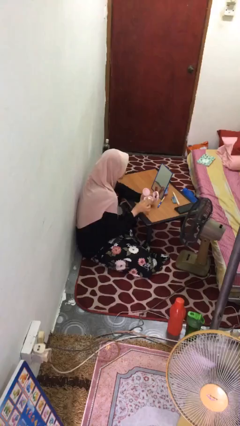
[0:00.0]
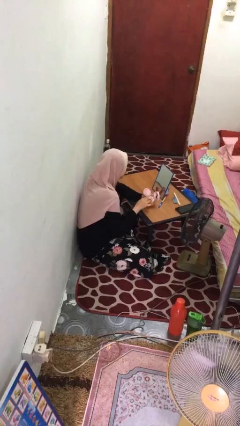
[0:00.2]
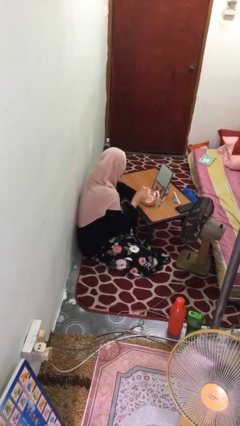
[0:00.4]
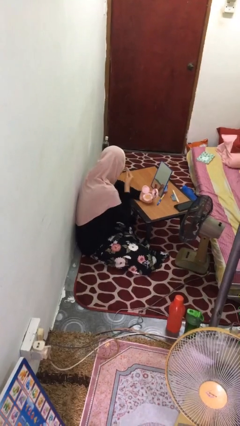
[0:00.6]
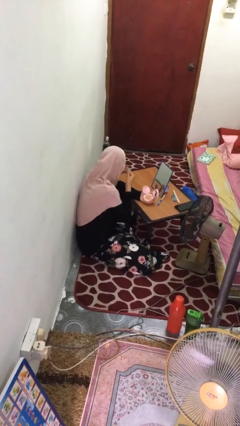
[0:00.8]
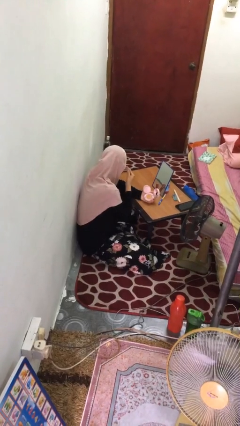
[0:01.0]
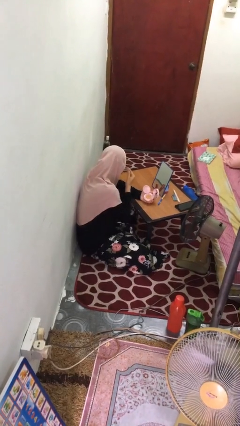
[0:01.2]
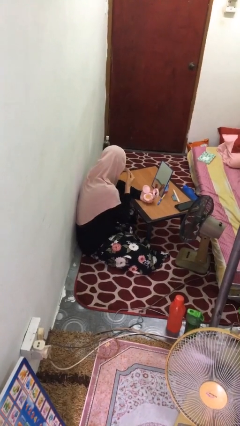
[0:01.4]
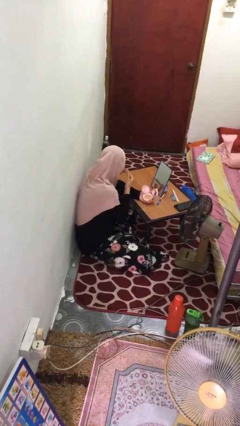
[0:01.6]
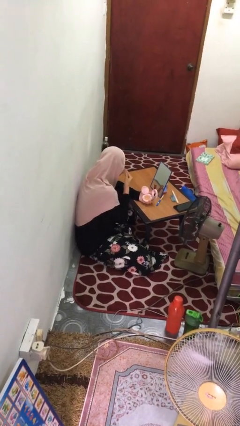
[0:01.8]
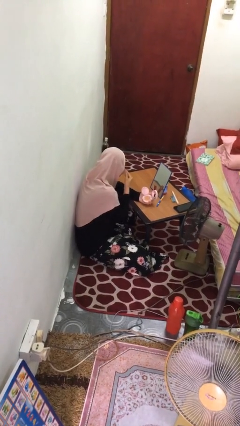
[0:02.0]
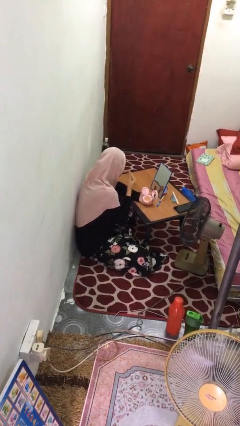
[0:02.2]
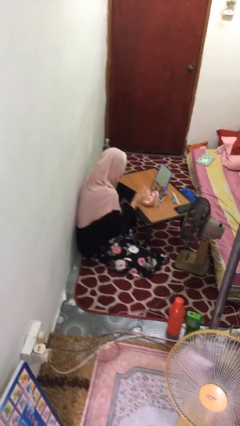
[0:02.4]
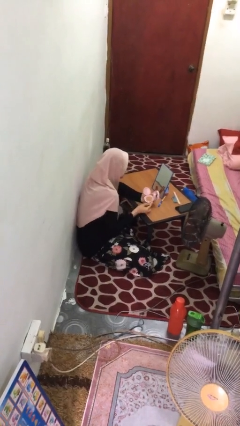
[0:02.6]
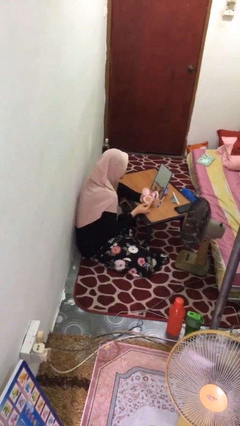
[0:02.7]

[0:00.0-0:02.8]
person applies foundation makeup

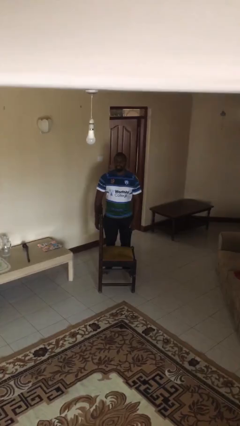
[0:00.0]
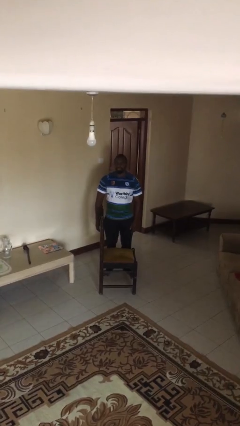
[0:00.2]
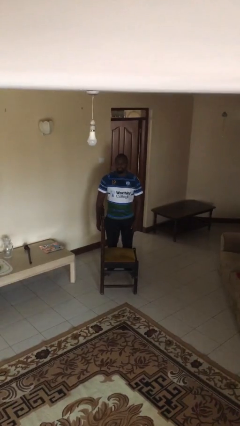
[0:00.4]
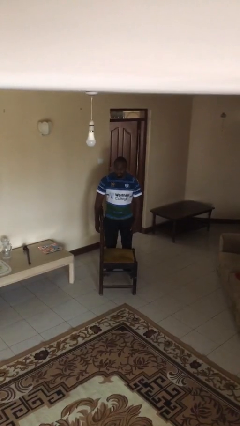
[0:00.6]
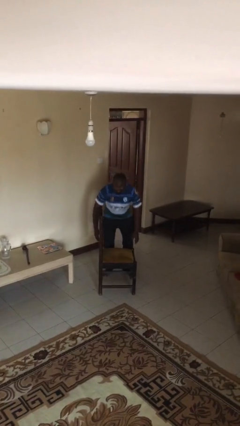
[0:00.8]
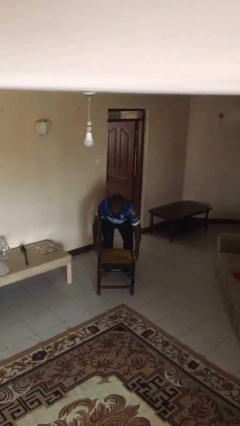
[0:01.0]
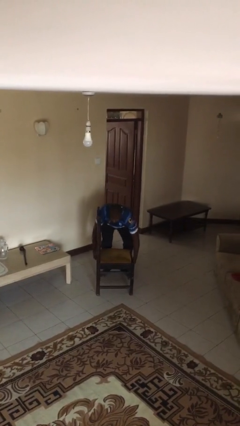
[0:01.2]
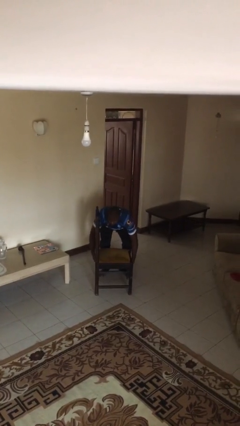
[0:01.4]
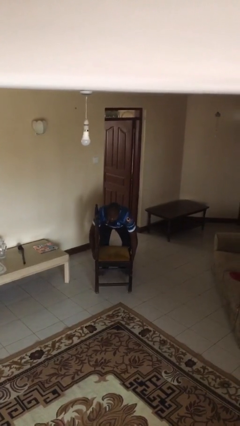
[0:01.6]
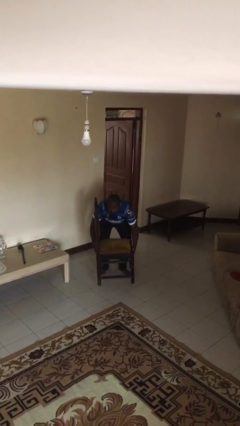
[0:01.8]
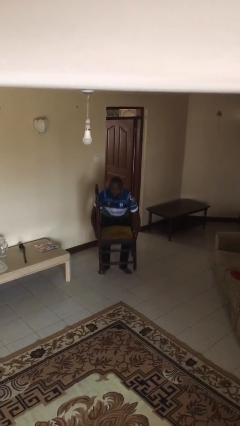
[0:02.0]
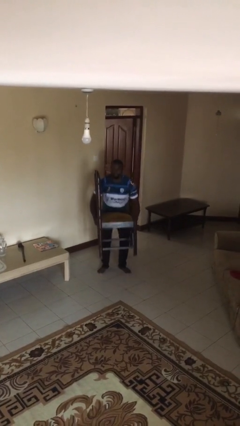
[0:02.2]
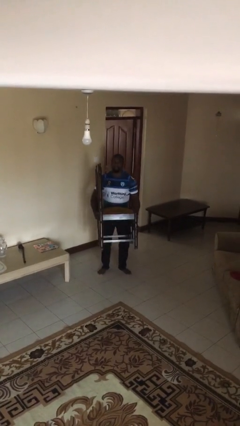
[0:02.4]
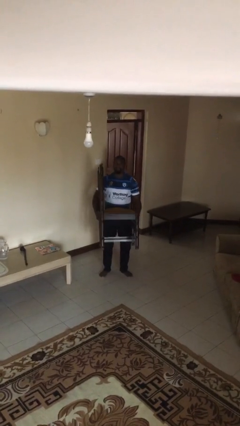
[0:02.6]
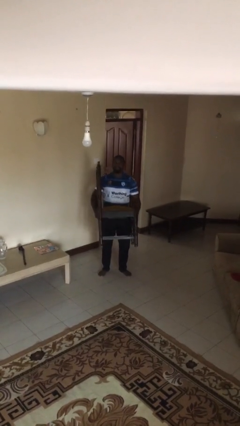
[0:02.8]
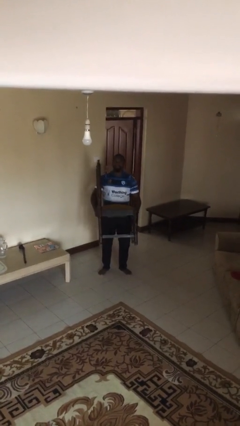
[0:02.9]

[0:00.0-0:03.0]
person picks up object from floor

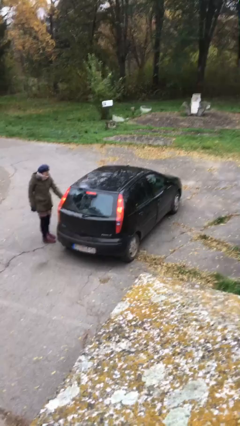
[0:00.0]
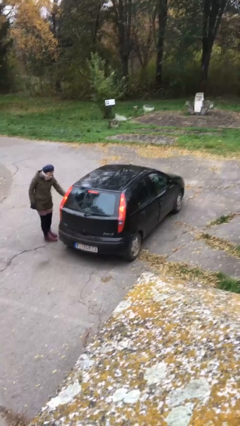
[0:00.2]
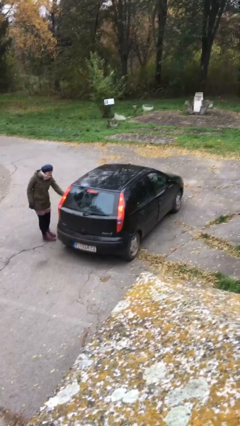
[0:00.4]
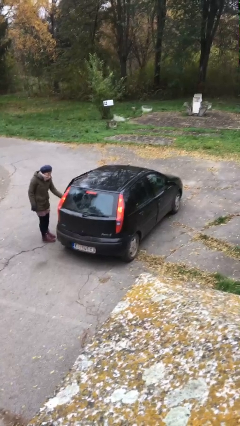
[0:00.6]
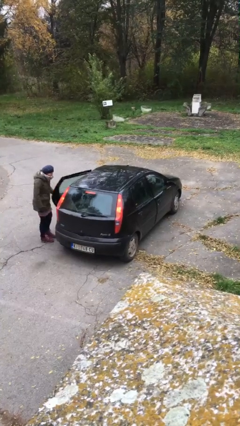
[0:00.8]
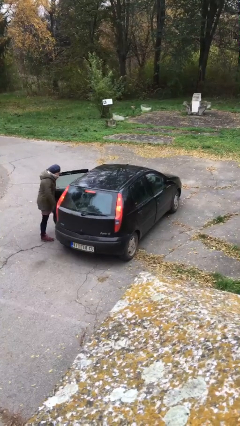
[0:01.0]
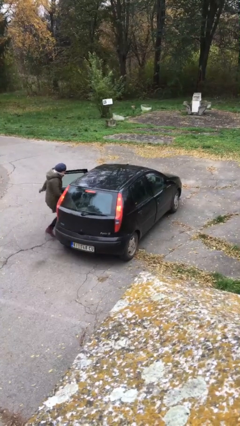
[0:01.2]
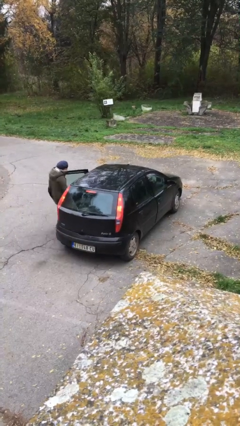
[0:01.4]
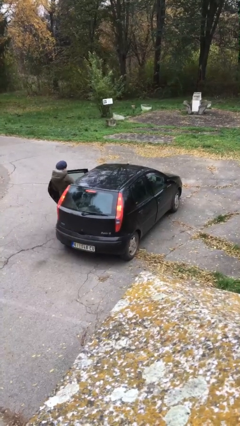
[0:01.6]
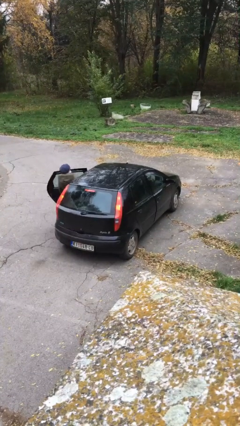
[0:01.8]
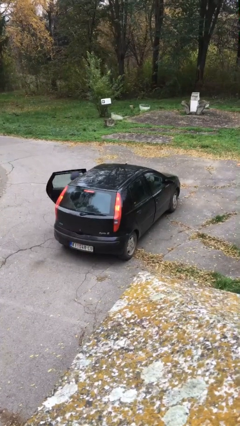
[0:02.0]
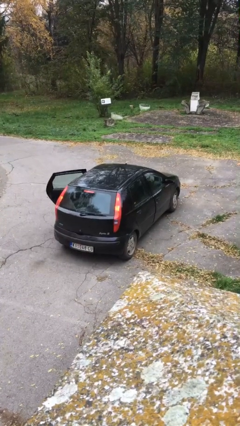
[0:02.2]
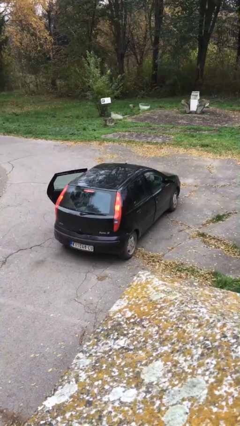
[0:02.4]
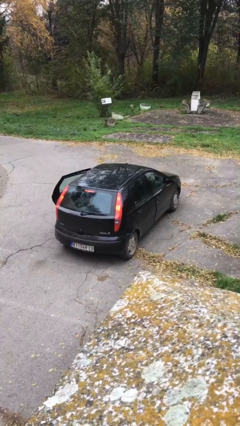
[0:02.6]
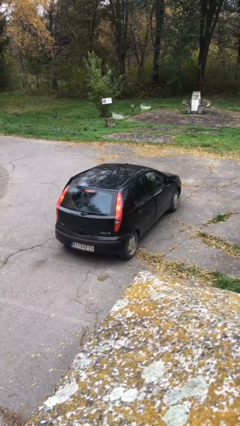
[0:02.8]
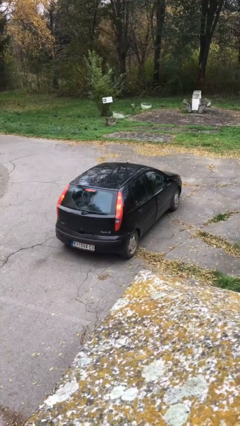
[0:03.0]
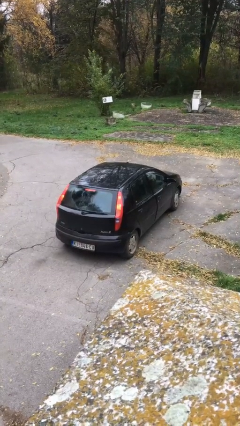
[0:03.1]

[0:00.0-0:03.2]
car picks up person

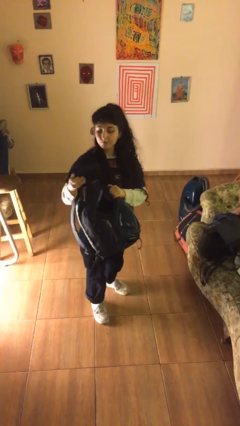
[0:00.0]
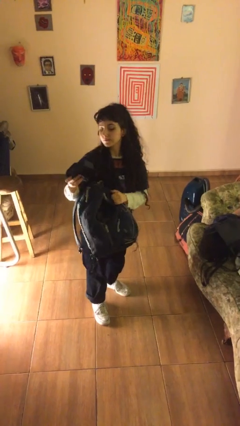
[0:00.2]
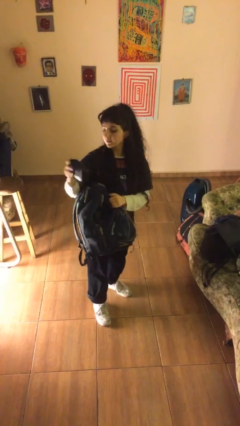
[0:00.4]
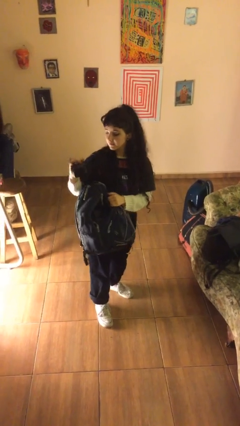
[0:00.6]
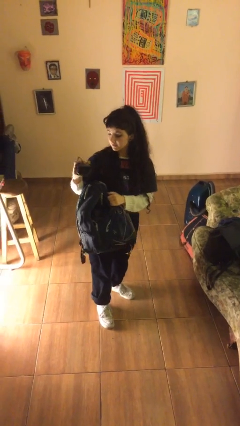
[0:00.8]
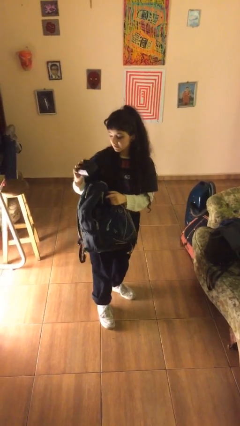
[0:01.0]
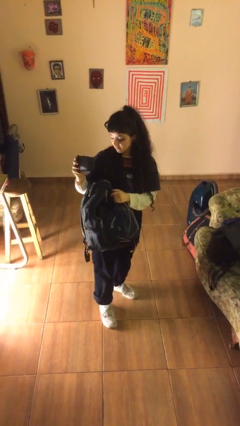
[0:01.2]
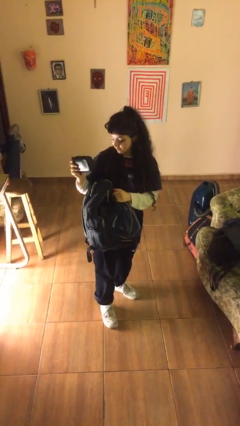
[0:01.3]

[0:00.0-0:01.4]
person takes object from backpack

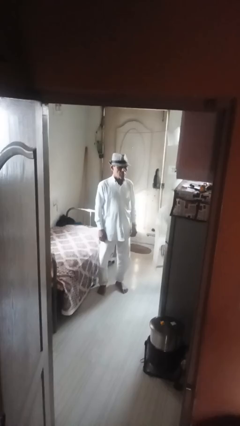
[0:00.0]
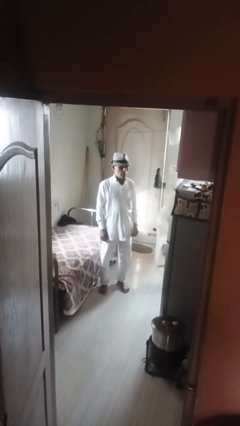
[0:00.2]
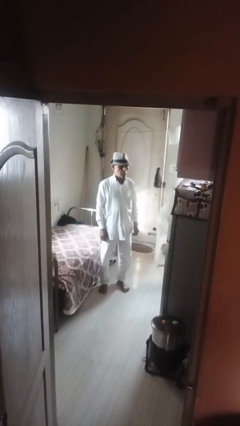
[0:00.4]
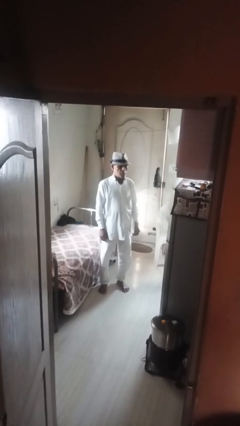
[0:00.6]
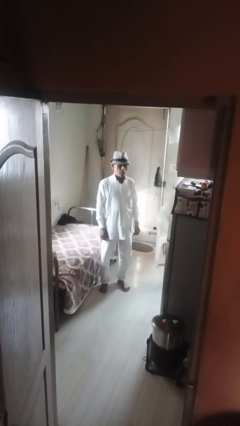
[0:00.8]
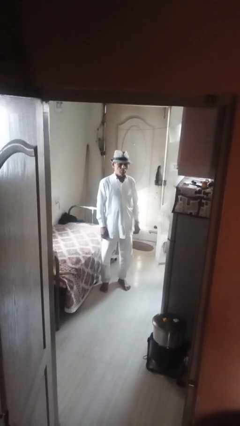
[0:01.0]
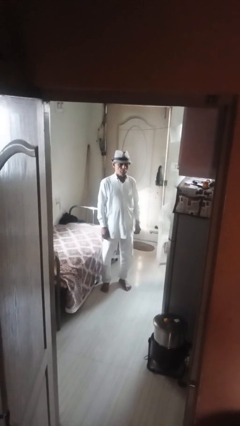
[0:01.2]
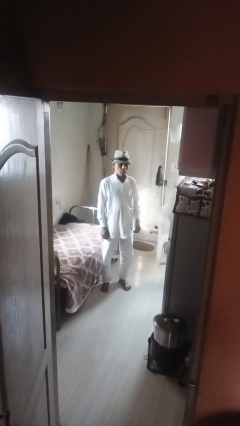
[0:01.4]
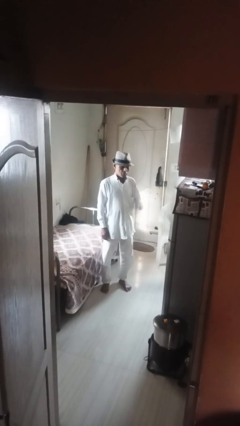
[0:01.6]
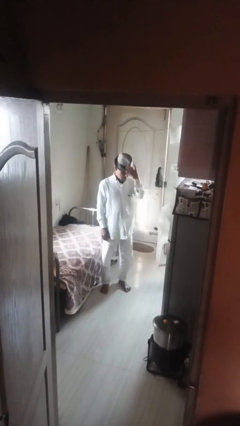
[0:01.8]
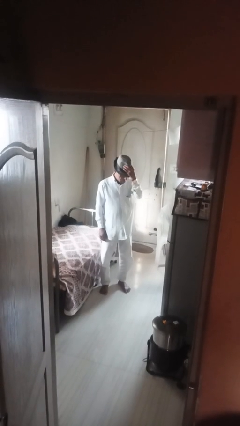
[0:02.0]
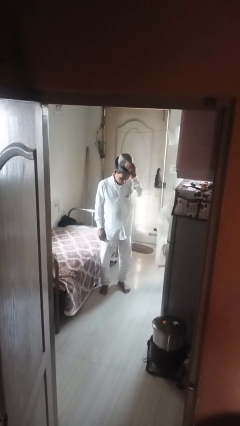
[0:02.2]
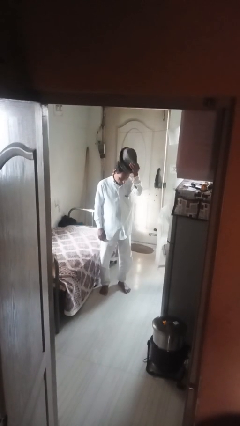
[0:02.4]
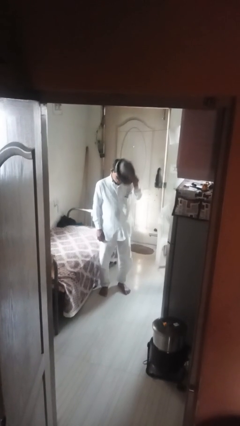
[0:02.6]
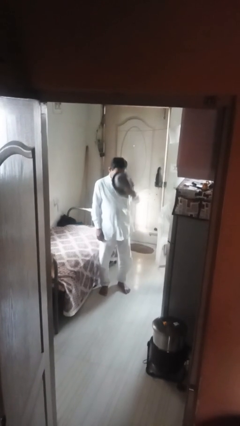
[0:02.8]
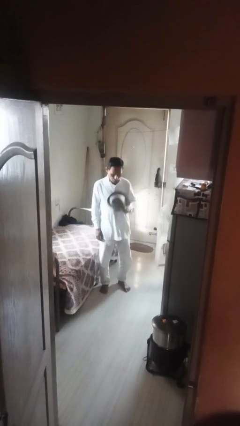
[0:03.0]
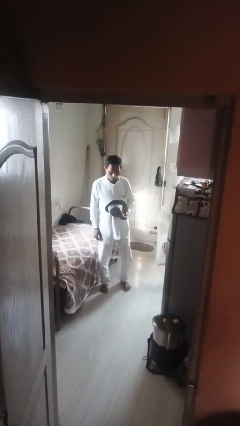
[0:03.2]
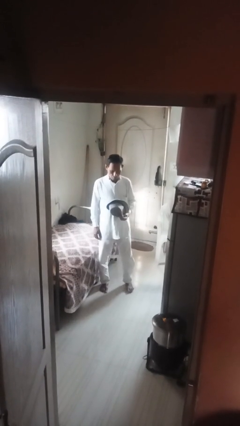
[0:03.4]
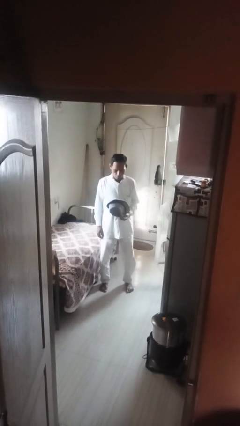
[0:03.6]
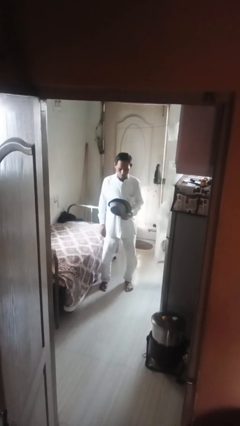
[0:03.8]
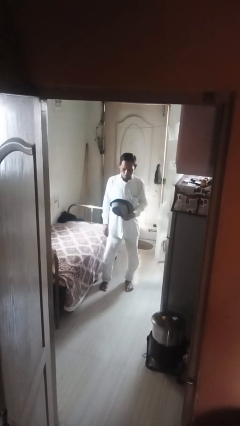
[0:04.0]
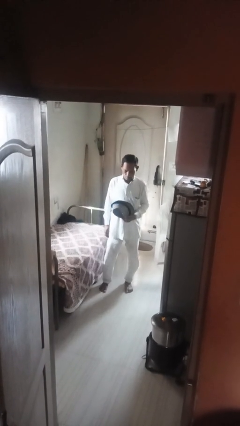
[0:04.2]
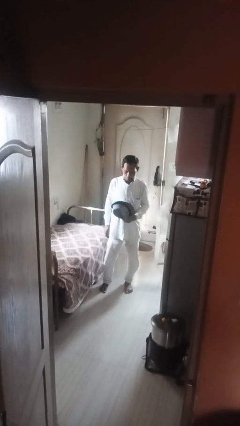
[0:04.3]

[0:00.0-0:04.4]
person takes off hat

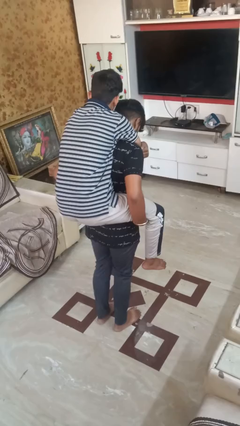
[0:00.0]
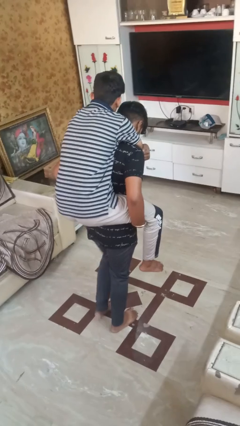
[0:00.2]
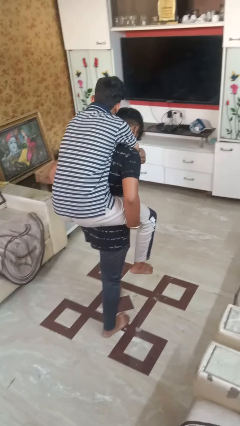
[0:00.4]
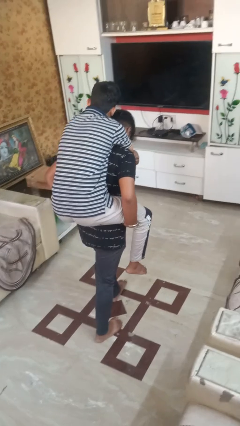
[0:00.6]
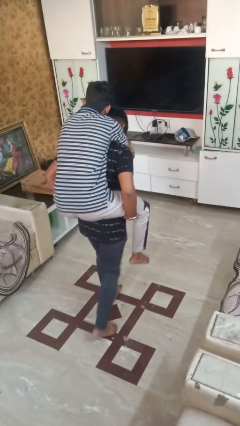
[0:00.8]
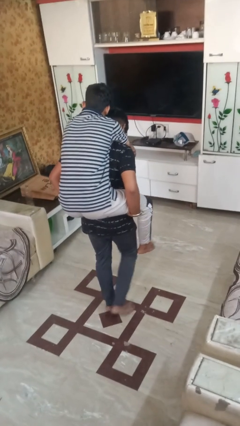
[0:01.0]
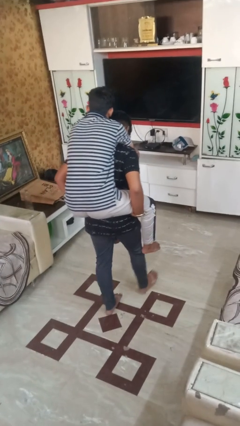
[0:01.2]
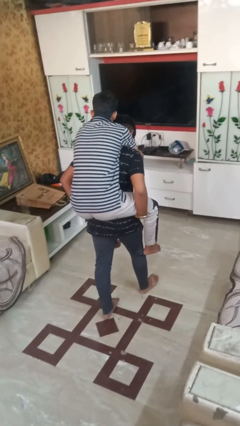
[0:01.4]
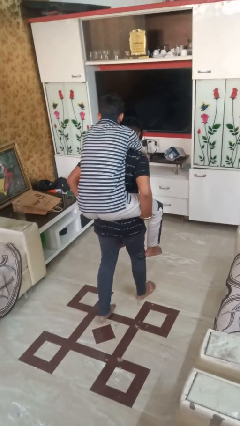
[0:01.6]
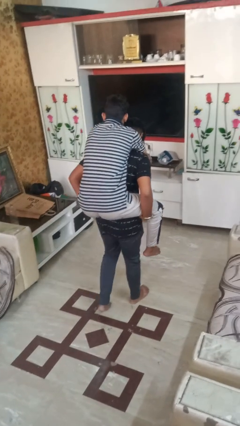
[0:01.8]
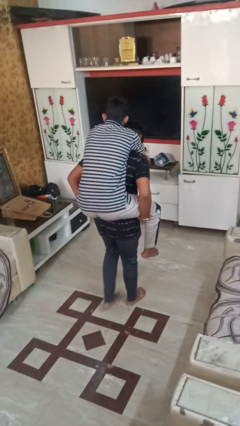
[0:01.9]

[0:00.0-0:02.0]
person carries person on back

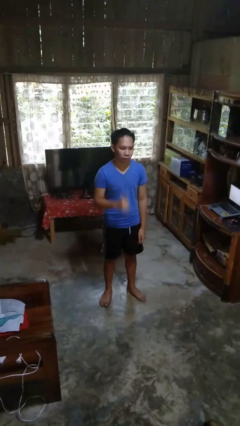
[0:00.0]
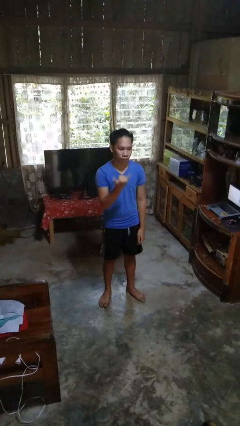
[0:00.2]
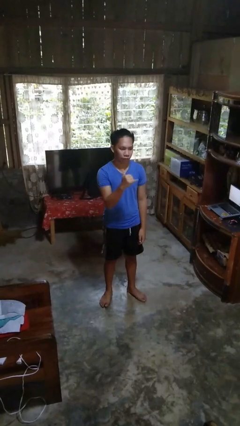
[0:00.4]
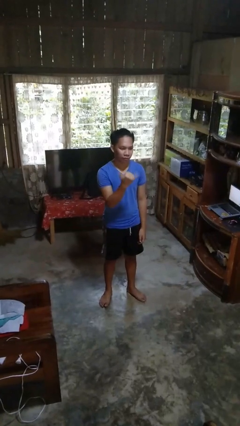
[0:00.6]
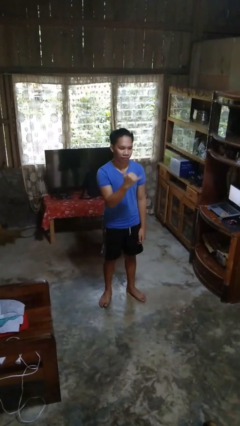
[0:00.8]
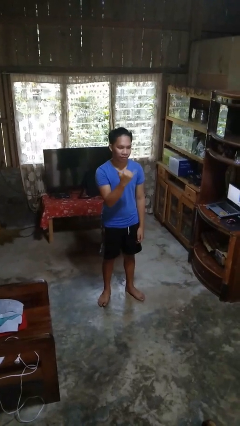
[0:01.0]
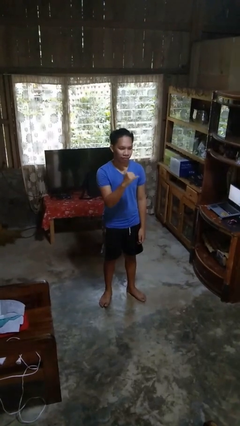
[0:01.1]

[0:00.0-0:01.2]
person gestures hang loose
